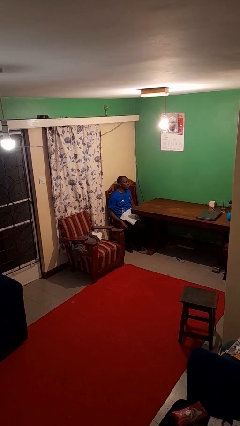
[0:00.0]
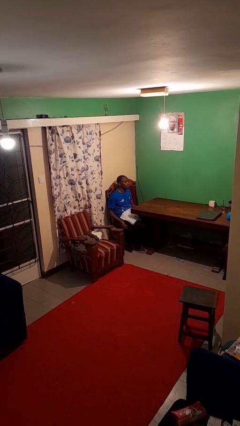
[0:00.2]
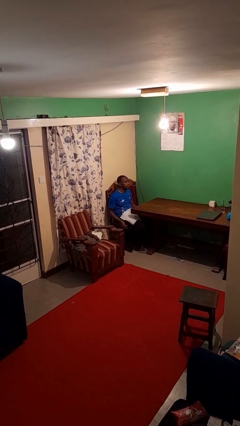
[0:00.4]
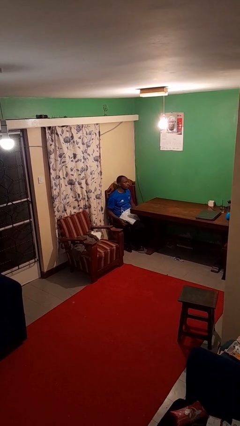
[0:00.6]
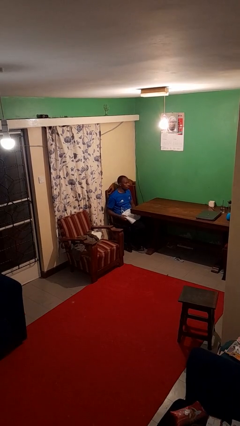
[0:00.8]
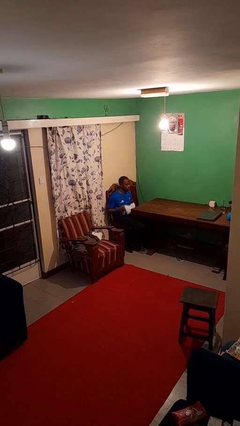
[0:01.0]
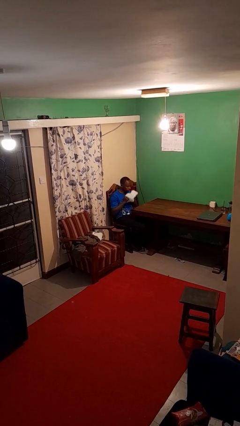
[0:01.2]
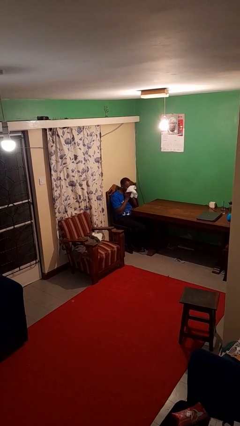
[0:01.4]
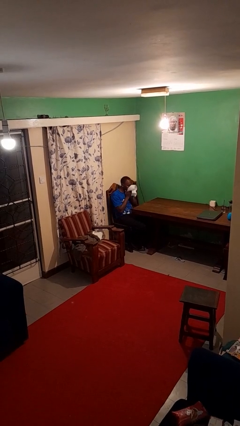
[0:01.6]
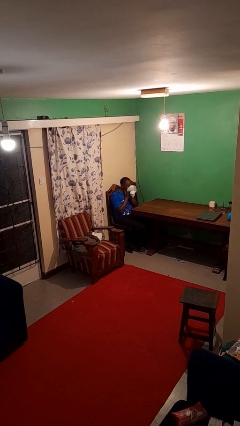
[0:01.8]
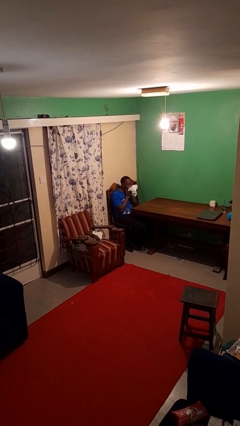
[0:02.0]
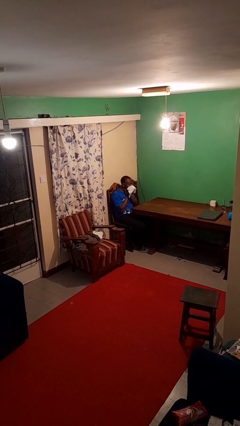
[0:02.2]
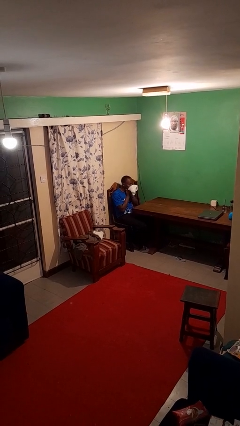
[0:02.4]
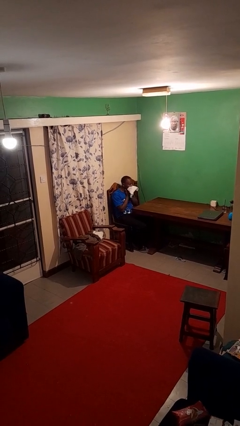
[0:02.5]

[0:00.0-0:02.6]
person wipes mouth with napkin

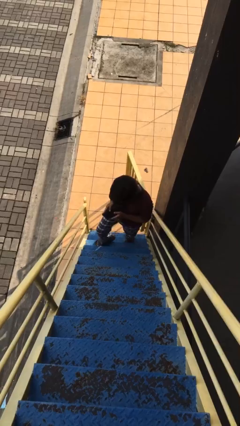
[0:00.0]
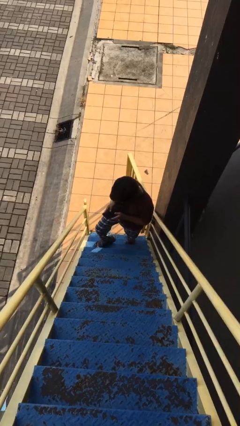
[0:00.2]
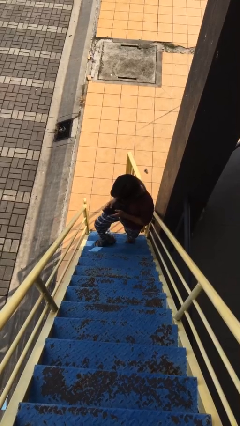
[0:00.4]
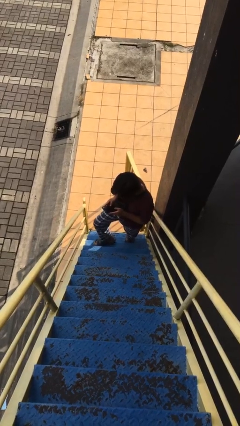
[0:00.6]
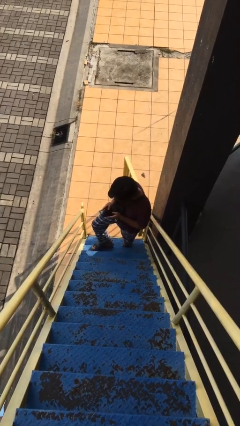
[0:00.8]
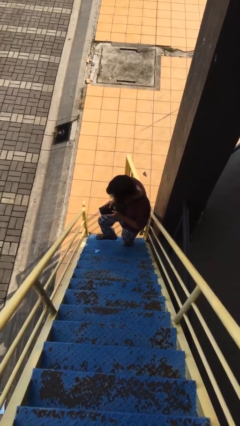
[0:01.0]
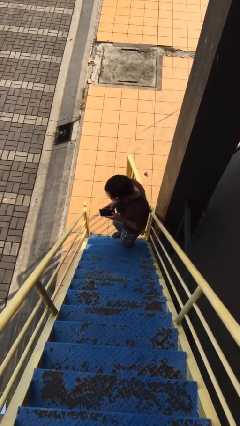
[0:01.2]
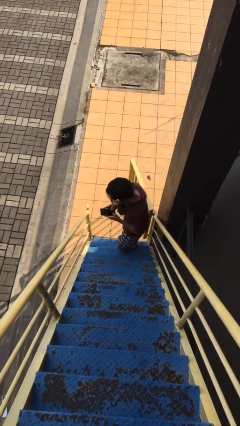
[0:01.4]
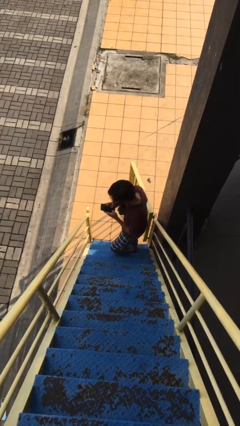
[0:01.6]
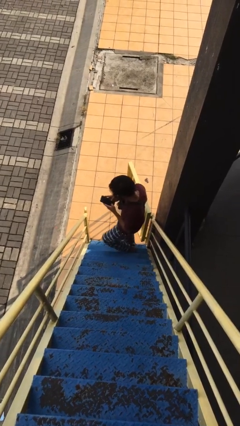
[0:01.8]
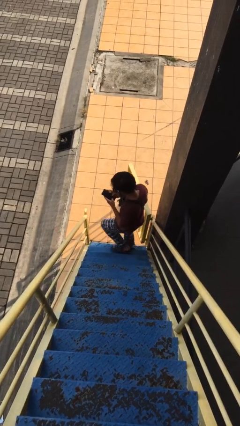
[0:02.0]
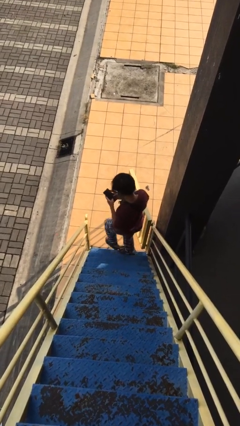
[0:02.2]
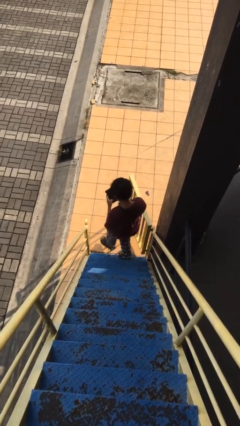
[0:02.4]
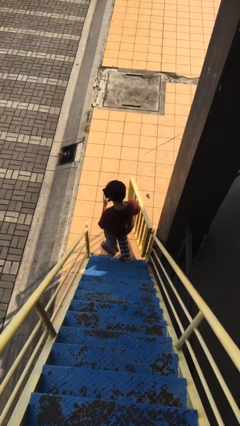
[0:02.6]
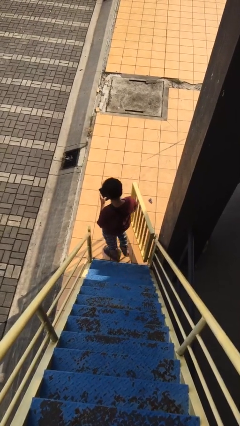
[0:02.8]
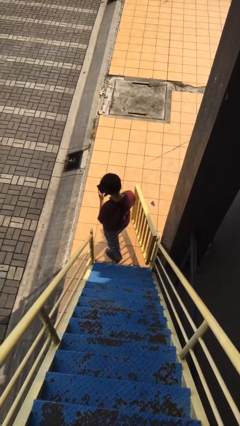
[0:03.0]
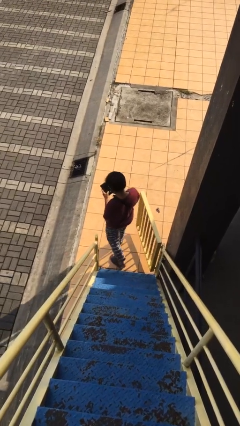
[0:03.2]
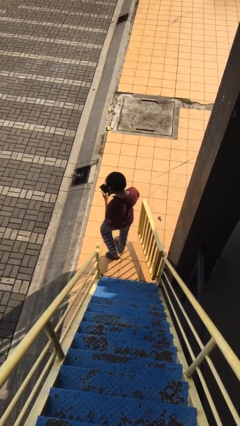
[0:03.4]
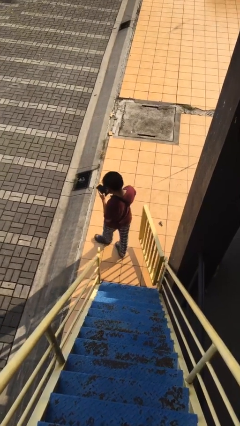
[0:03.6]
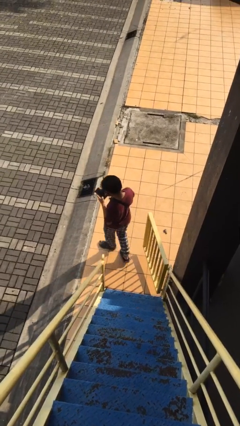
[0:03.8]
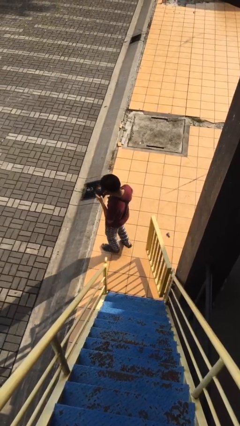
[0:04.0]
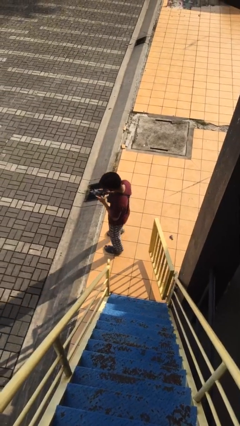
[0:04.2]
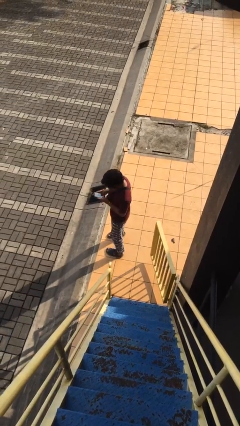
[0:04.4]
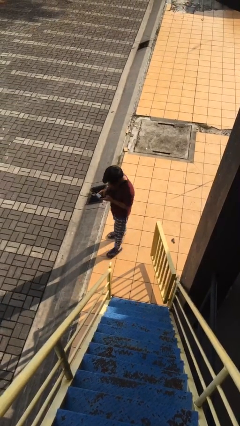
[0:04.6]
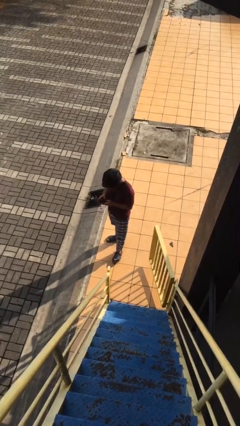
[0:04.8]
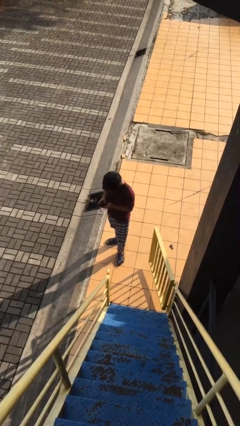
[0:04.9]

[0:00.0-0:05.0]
person exits scene through structure

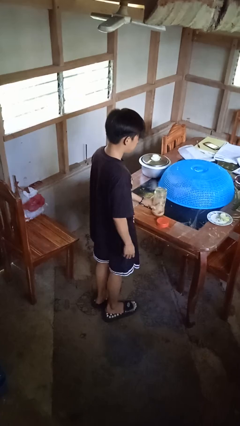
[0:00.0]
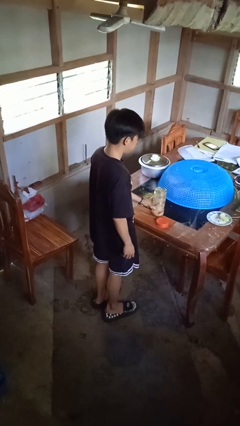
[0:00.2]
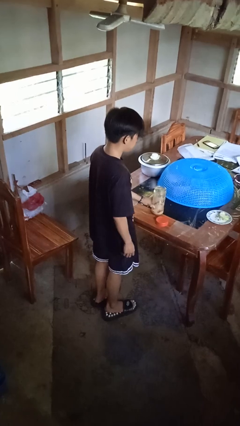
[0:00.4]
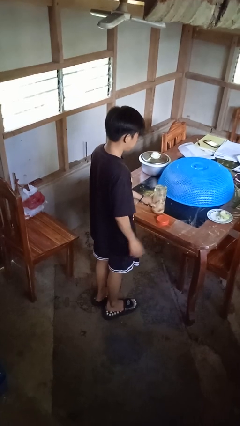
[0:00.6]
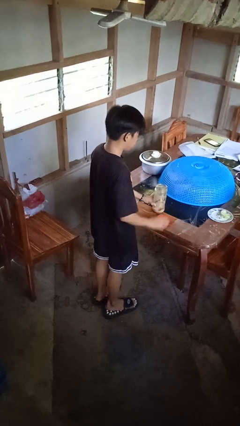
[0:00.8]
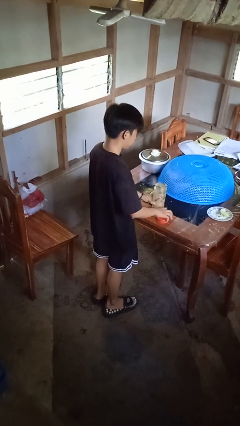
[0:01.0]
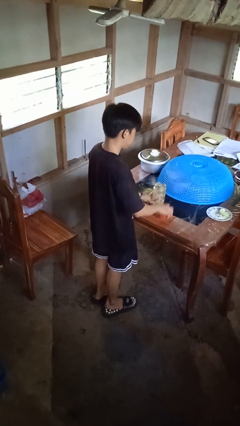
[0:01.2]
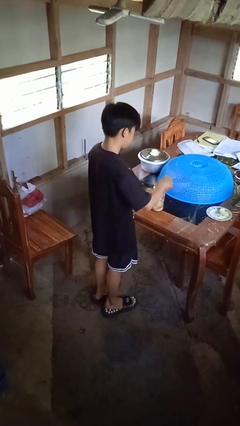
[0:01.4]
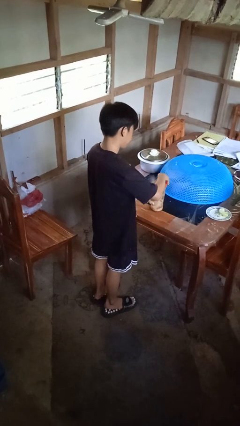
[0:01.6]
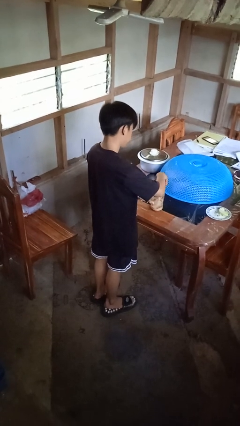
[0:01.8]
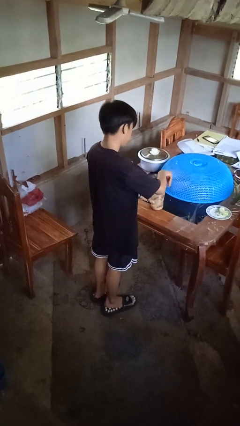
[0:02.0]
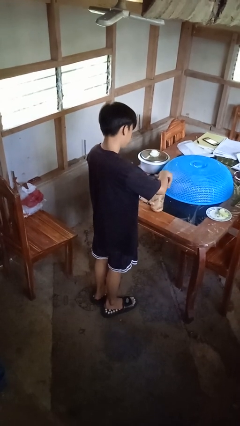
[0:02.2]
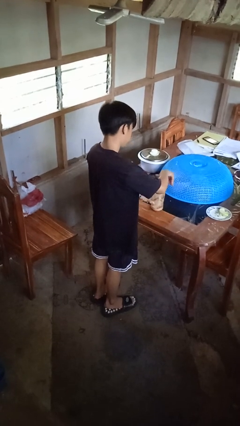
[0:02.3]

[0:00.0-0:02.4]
person closes jar

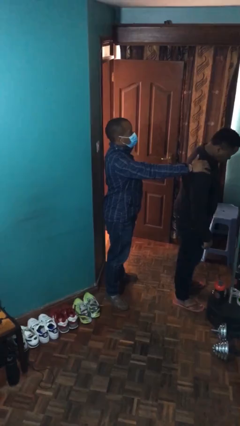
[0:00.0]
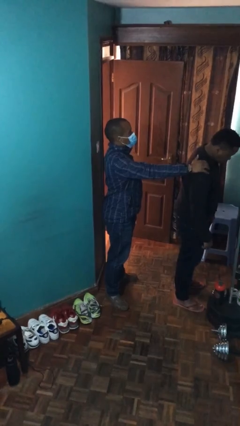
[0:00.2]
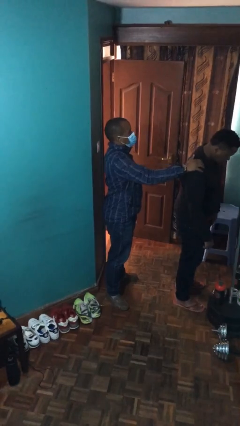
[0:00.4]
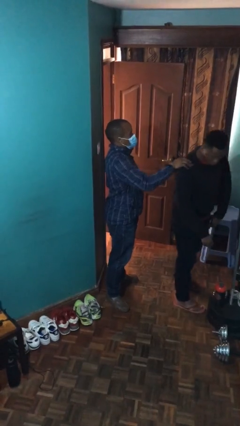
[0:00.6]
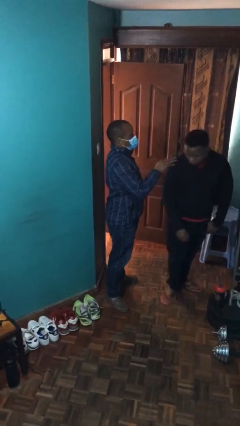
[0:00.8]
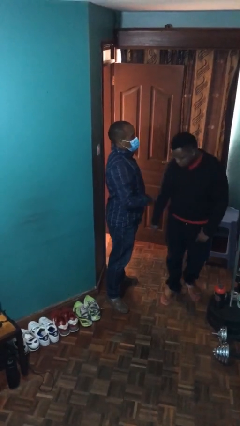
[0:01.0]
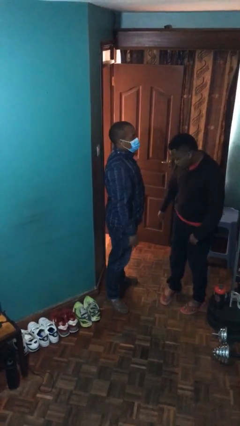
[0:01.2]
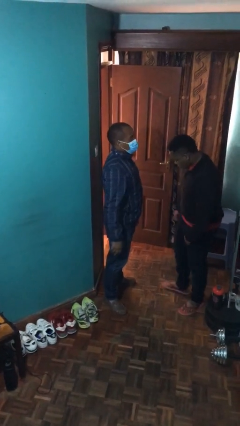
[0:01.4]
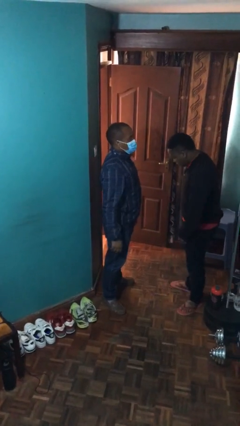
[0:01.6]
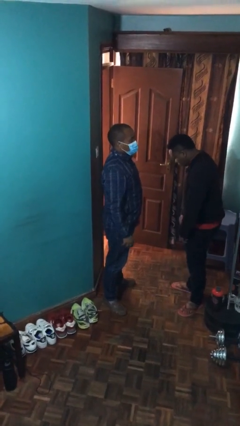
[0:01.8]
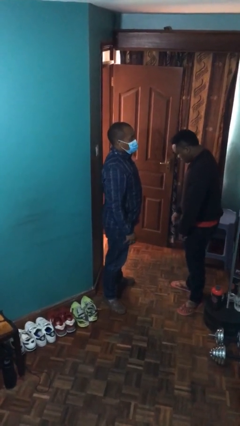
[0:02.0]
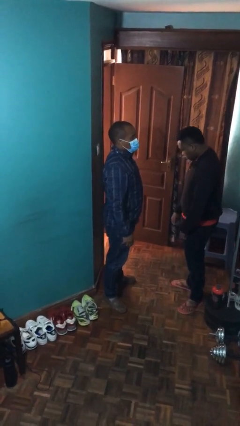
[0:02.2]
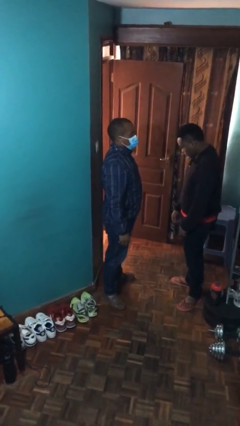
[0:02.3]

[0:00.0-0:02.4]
person spins person around

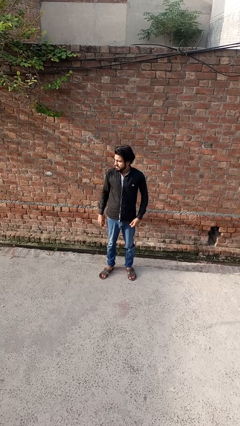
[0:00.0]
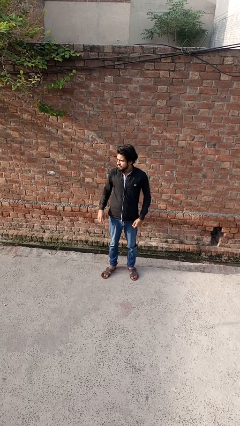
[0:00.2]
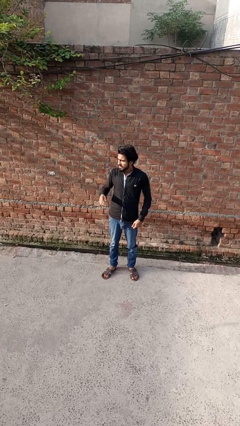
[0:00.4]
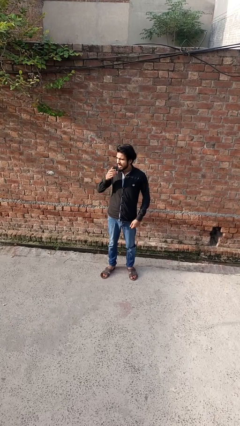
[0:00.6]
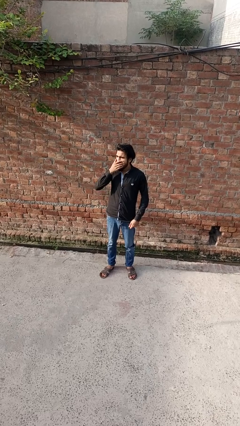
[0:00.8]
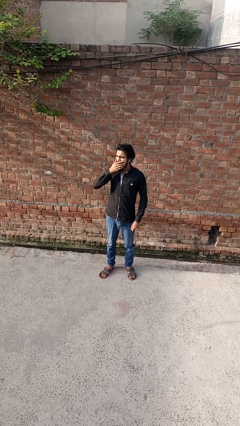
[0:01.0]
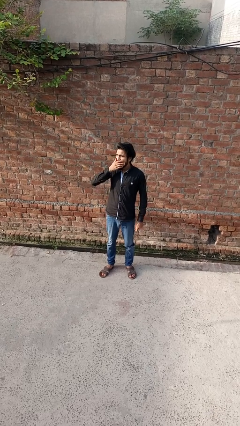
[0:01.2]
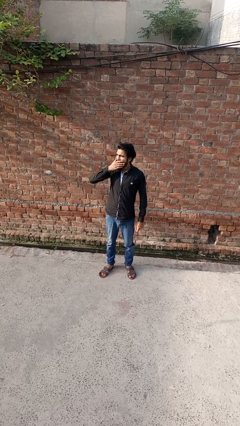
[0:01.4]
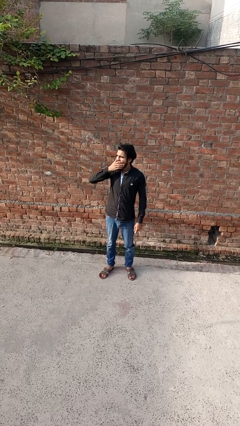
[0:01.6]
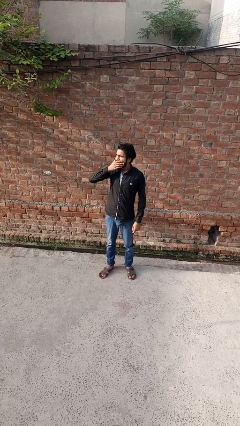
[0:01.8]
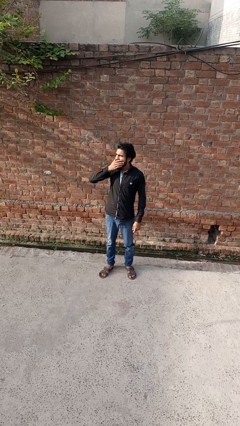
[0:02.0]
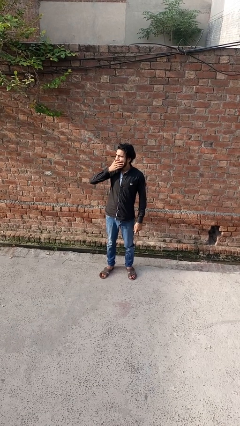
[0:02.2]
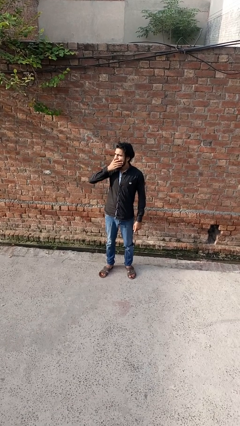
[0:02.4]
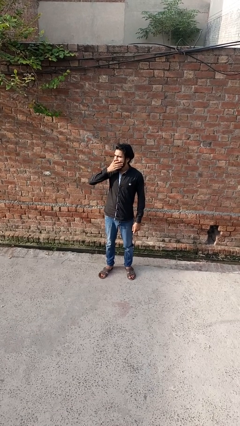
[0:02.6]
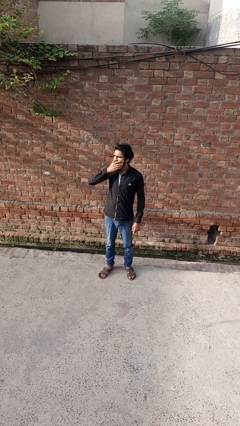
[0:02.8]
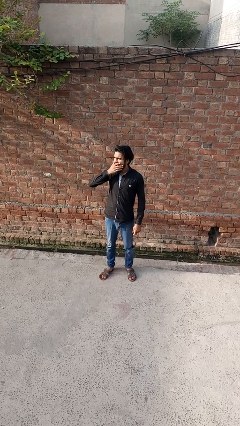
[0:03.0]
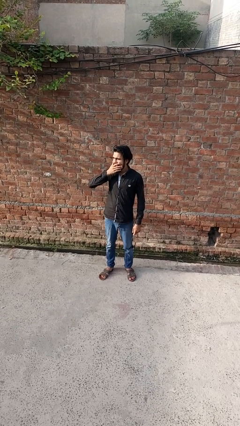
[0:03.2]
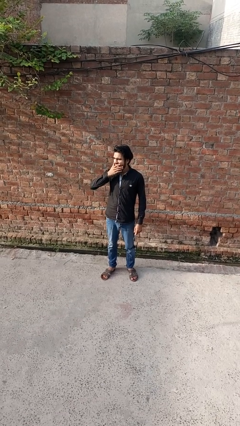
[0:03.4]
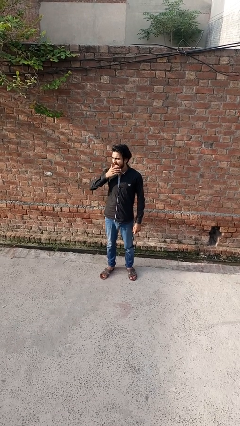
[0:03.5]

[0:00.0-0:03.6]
person yawns

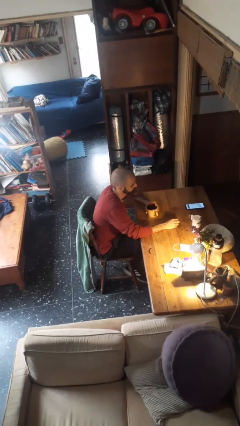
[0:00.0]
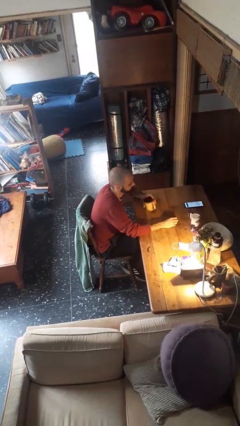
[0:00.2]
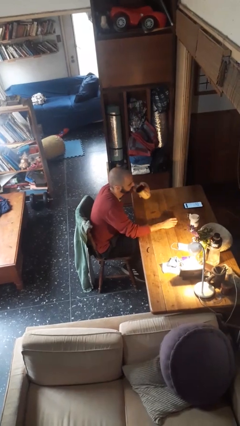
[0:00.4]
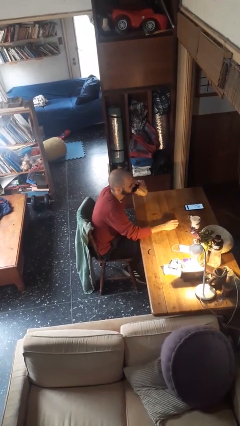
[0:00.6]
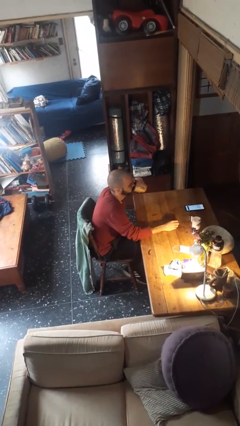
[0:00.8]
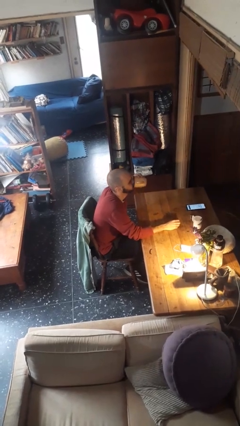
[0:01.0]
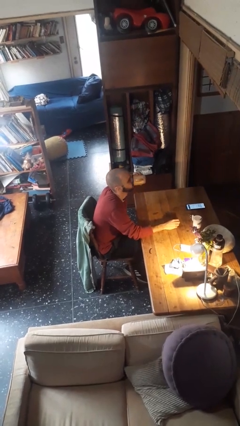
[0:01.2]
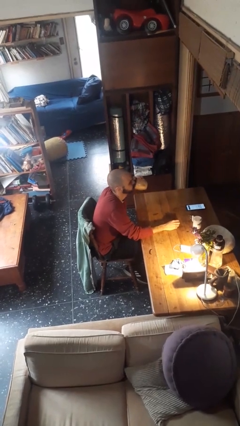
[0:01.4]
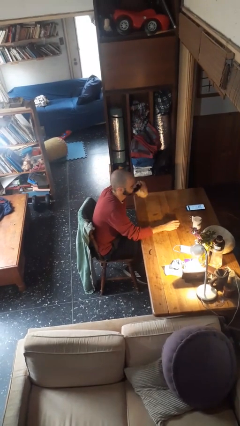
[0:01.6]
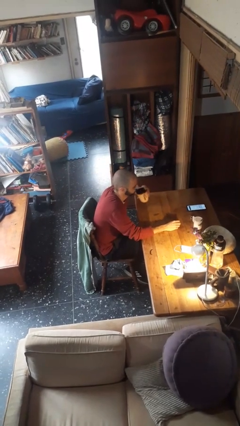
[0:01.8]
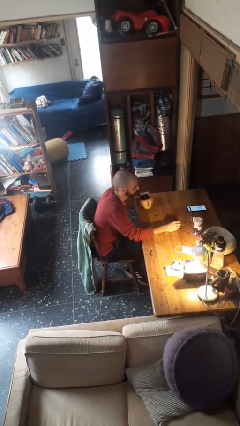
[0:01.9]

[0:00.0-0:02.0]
person drinks from mug
